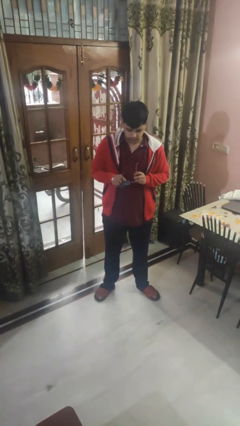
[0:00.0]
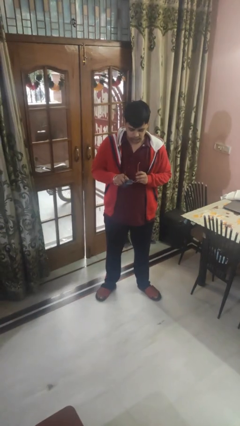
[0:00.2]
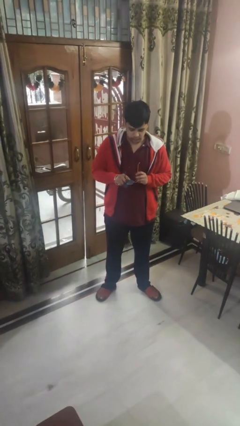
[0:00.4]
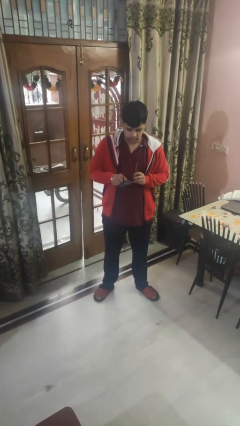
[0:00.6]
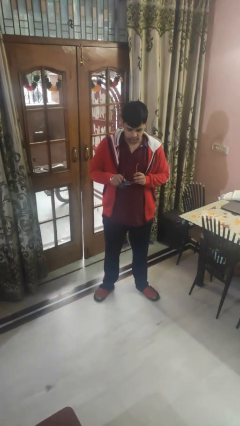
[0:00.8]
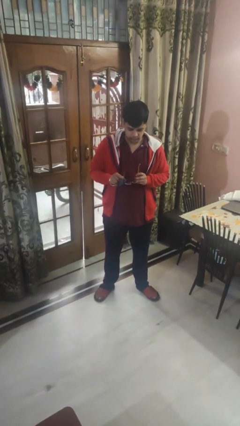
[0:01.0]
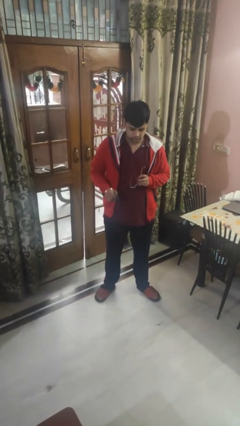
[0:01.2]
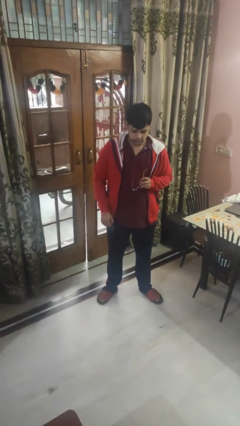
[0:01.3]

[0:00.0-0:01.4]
person cleans eyeglasses

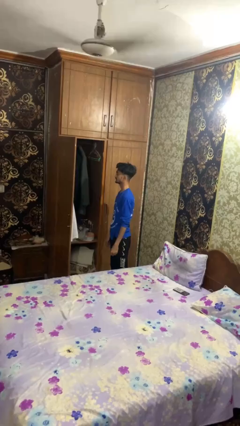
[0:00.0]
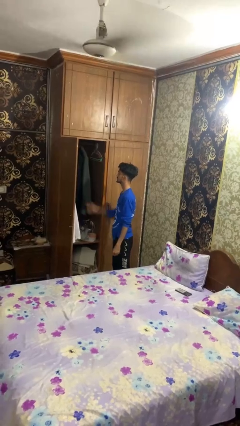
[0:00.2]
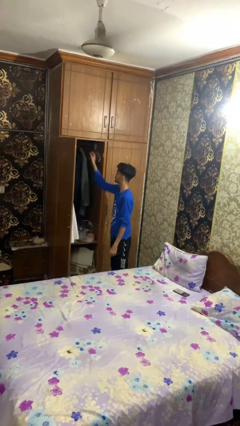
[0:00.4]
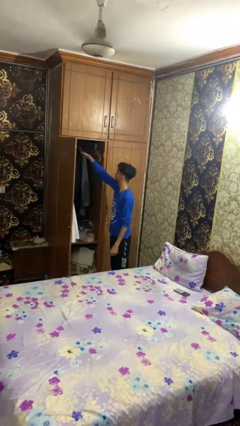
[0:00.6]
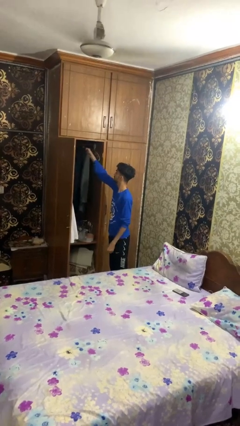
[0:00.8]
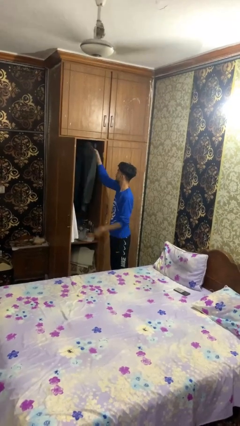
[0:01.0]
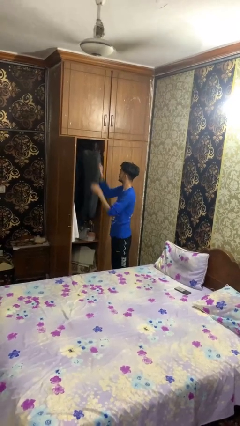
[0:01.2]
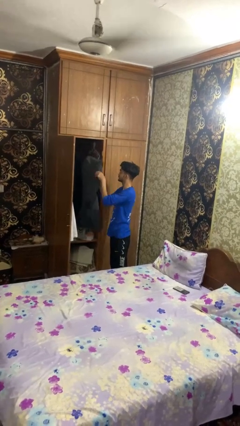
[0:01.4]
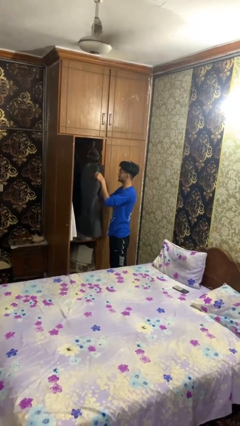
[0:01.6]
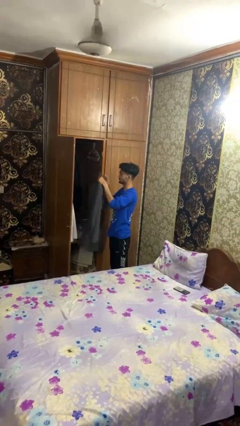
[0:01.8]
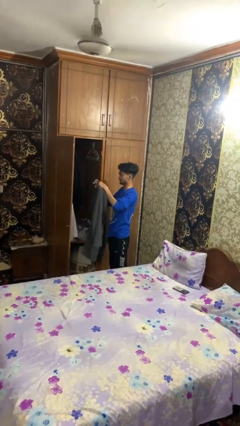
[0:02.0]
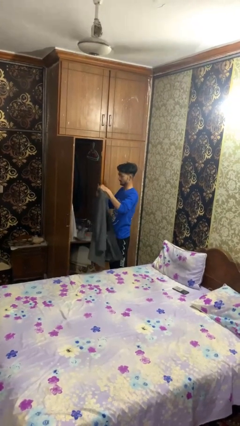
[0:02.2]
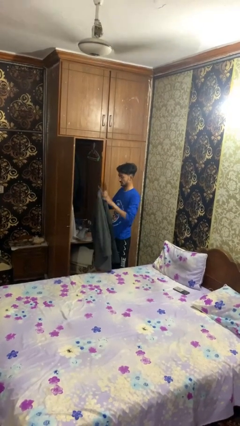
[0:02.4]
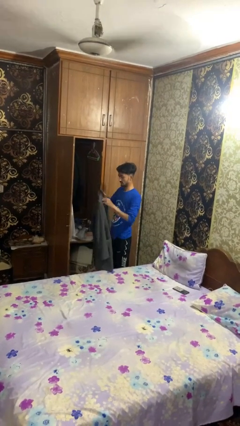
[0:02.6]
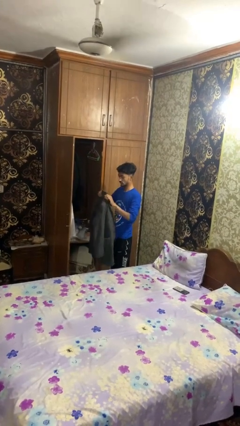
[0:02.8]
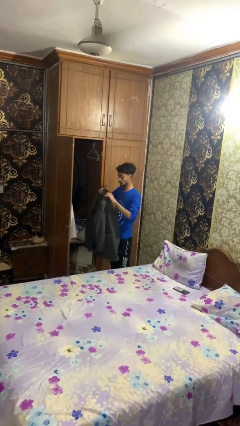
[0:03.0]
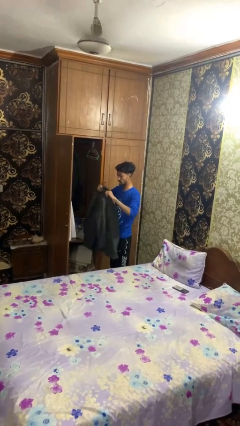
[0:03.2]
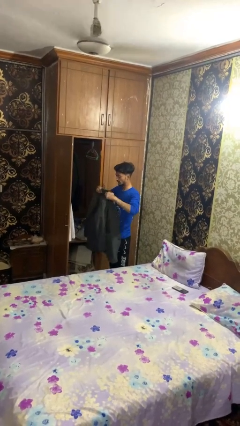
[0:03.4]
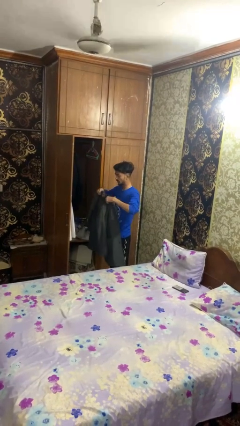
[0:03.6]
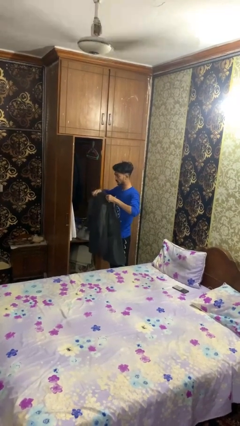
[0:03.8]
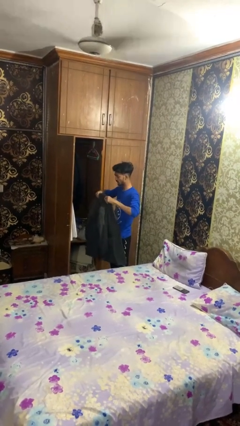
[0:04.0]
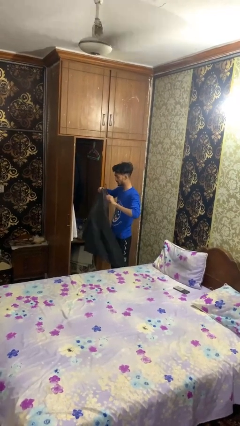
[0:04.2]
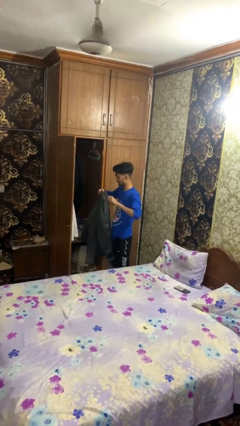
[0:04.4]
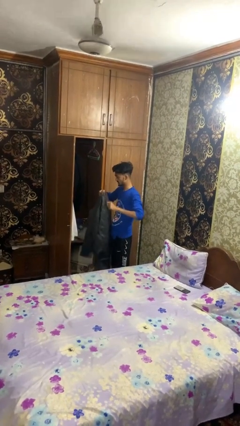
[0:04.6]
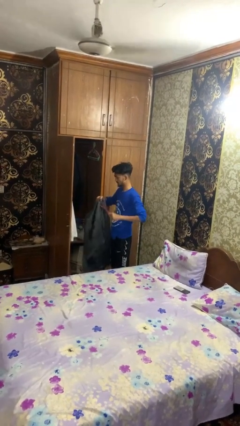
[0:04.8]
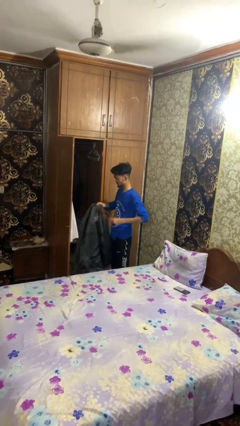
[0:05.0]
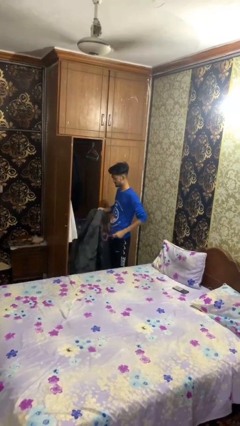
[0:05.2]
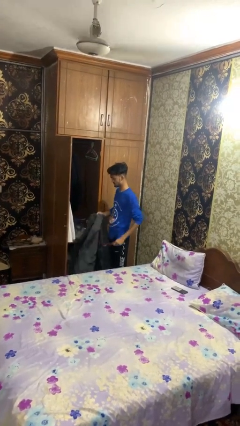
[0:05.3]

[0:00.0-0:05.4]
person takes clothes from closet

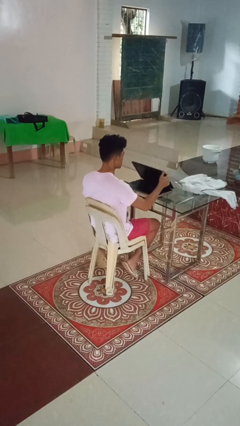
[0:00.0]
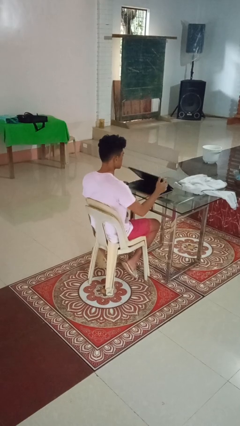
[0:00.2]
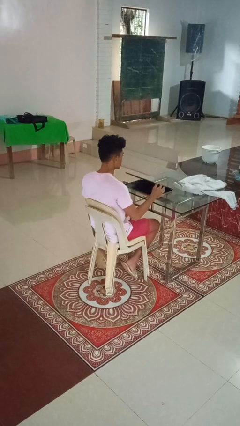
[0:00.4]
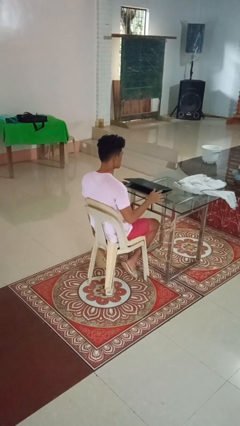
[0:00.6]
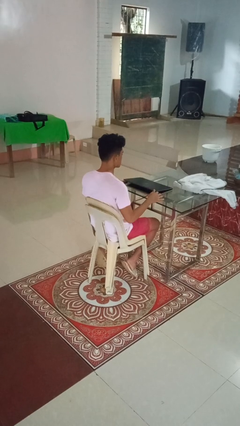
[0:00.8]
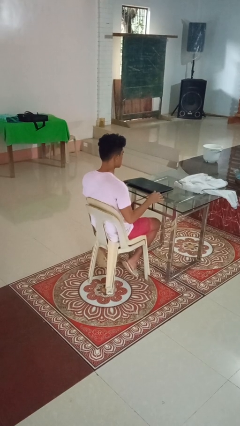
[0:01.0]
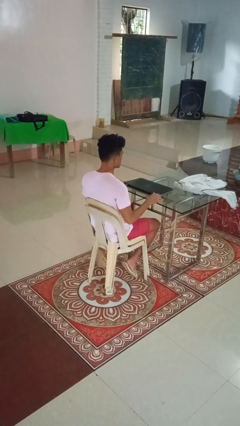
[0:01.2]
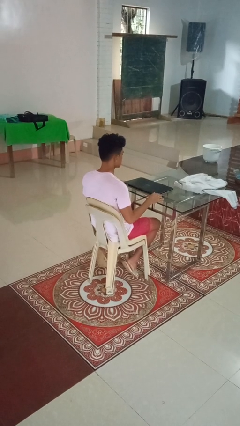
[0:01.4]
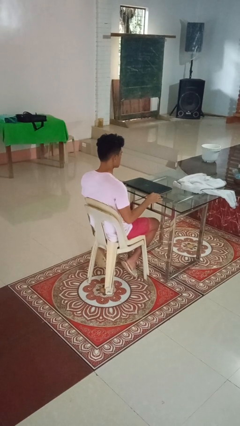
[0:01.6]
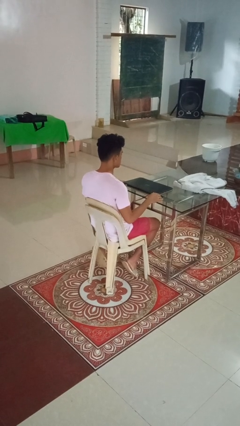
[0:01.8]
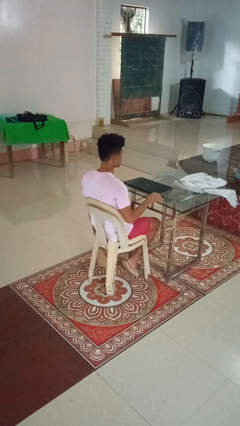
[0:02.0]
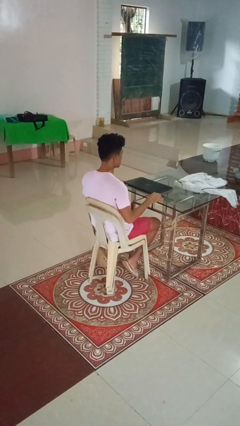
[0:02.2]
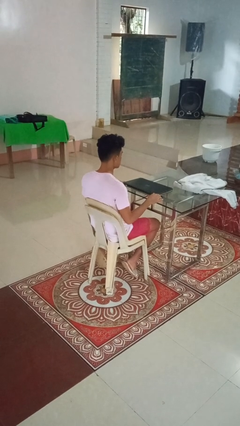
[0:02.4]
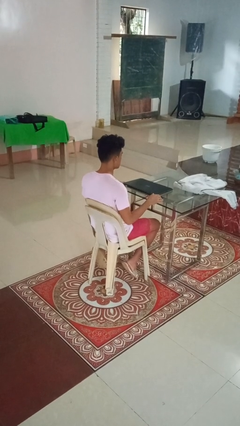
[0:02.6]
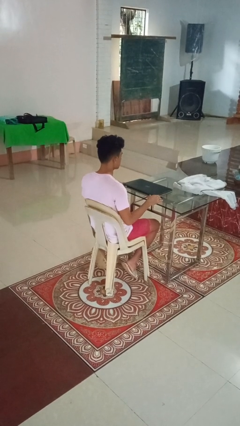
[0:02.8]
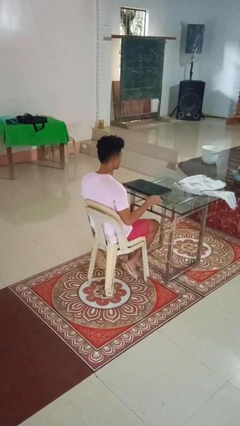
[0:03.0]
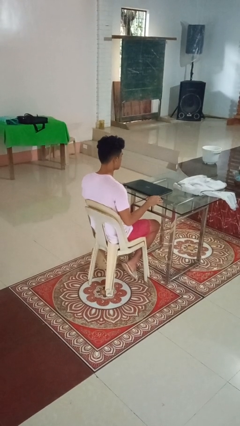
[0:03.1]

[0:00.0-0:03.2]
person closes laptop

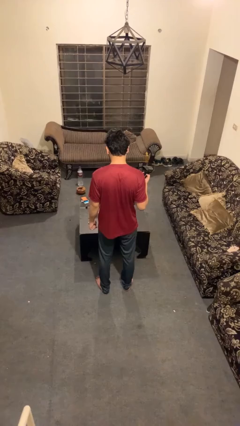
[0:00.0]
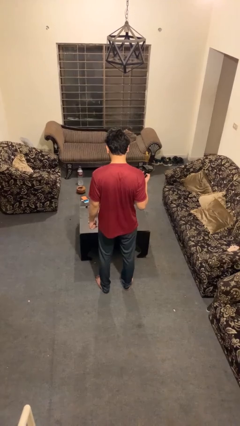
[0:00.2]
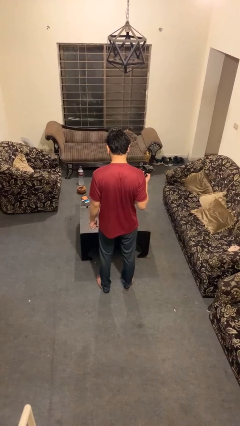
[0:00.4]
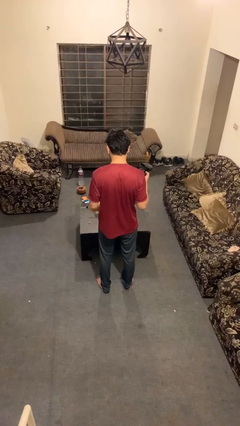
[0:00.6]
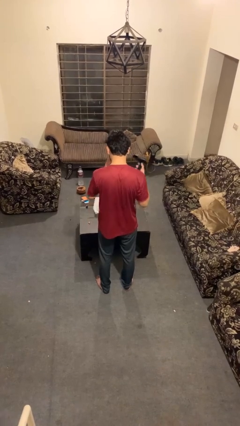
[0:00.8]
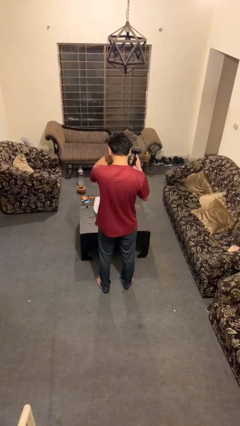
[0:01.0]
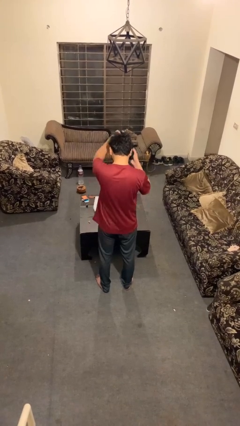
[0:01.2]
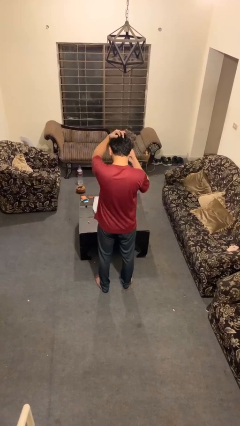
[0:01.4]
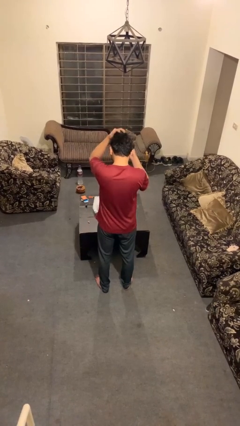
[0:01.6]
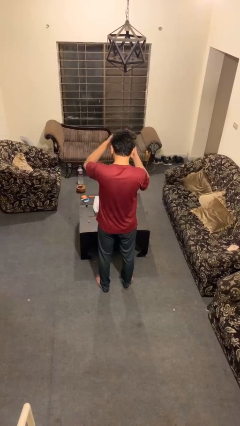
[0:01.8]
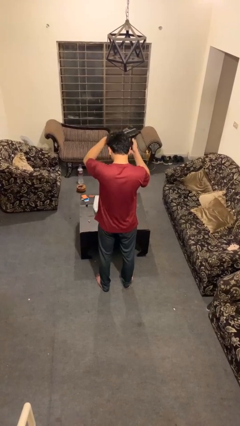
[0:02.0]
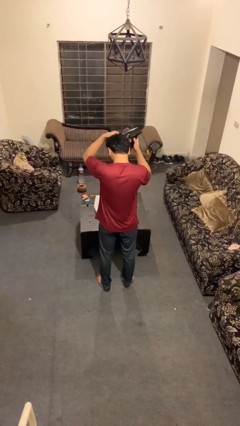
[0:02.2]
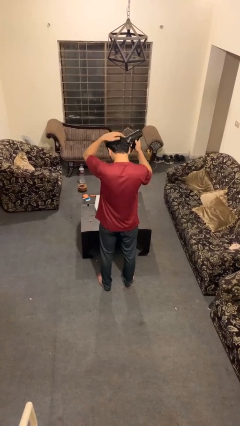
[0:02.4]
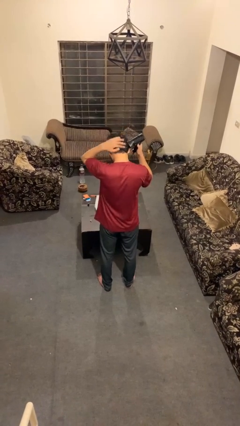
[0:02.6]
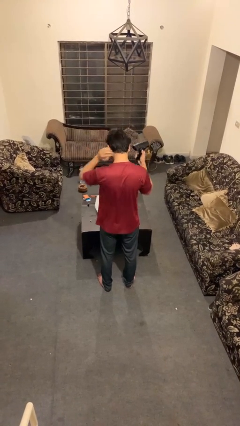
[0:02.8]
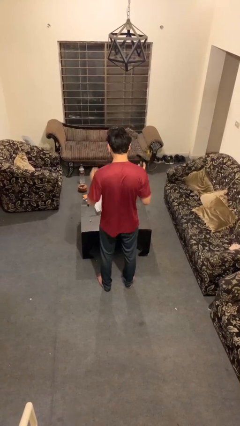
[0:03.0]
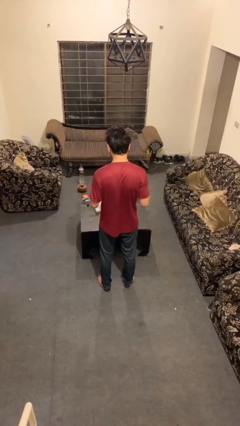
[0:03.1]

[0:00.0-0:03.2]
person dries hair with hairdryer

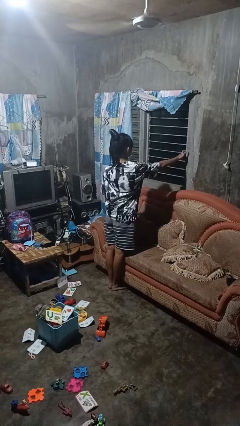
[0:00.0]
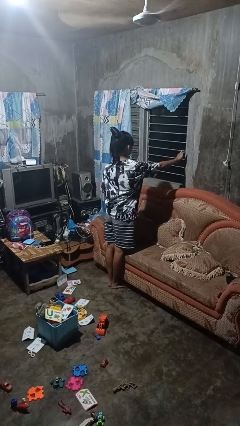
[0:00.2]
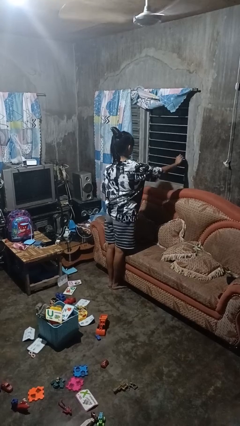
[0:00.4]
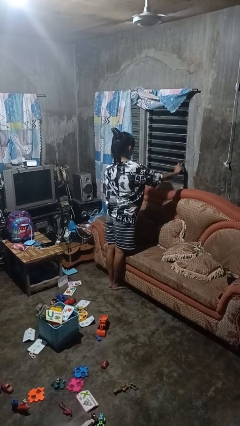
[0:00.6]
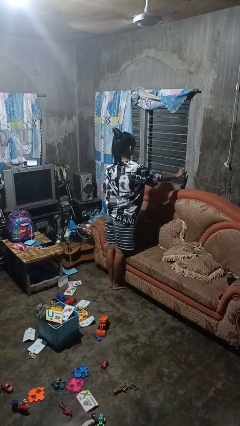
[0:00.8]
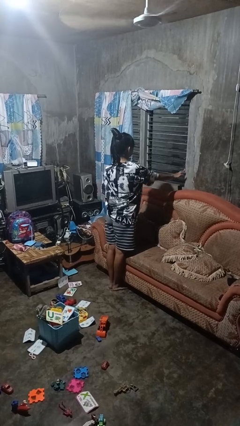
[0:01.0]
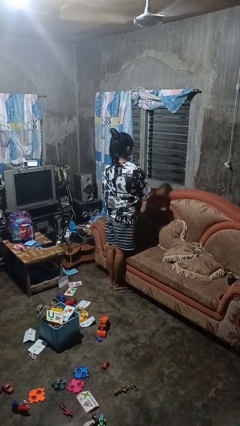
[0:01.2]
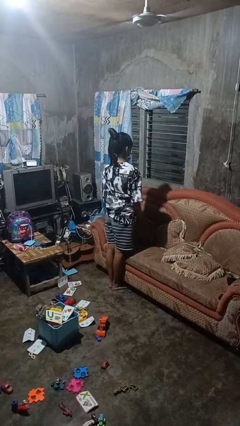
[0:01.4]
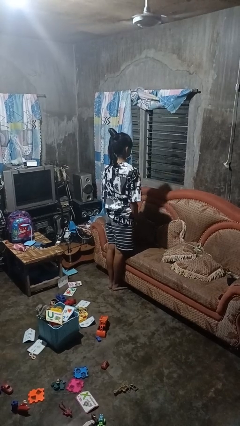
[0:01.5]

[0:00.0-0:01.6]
person opens home window

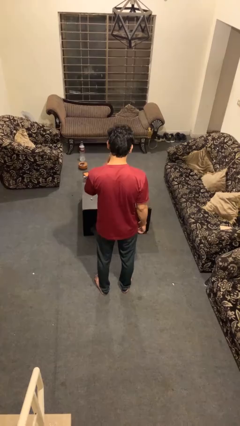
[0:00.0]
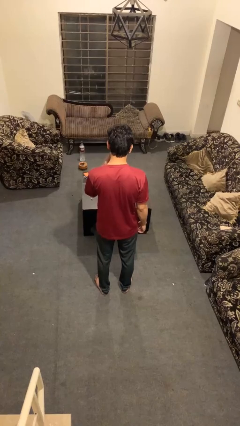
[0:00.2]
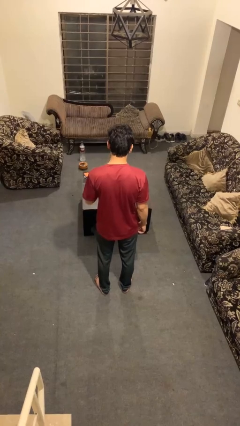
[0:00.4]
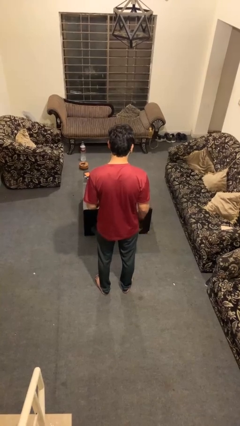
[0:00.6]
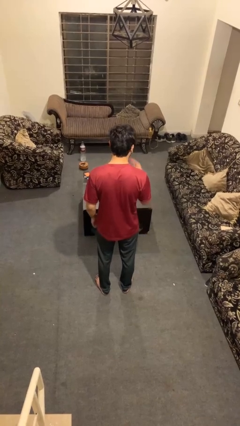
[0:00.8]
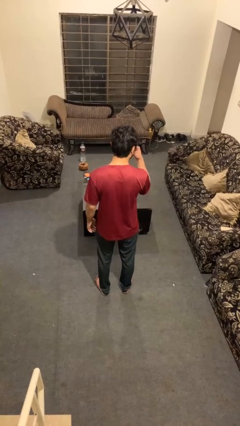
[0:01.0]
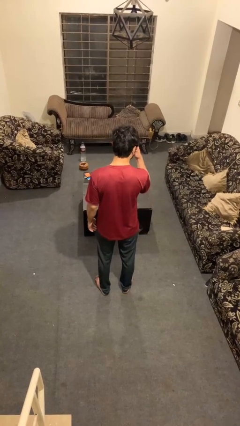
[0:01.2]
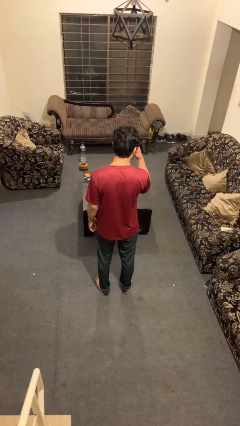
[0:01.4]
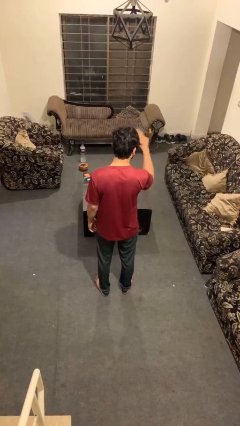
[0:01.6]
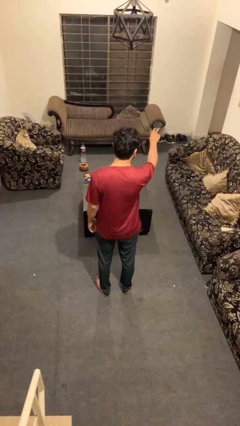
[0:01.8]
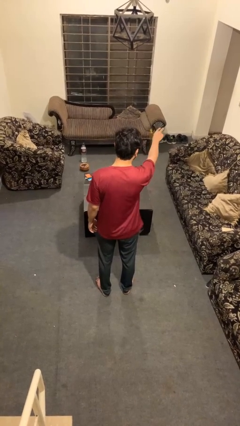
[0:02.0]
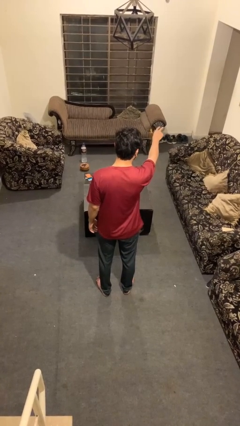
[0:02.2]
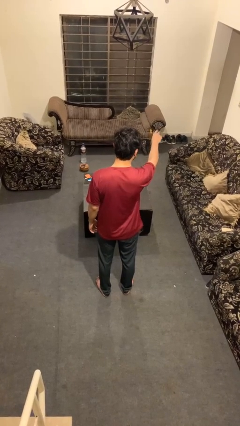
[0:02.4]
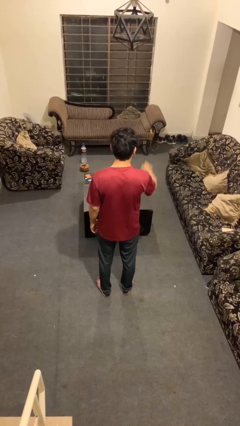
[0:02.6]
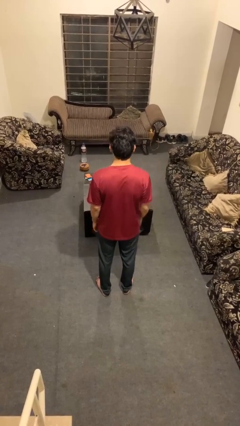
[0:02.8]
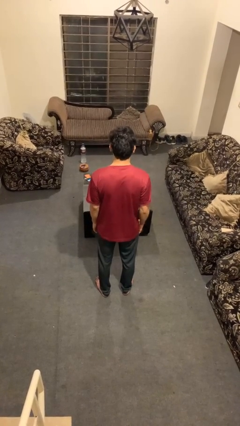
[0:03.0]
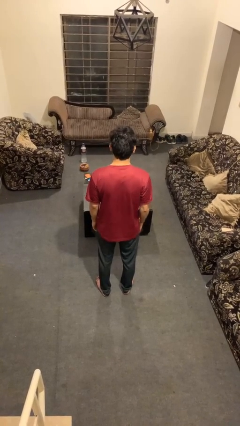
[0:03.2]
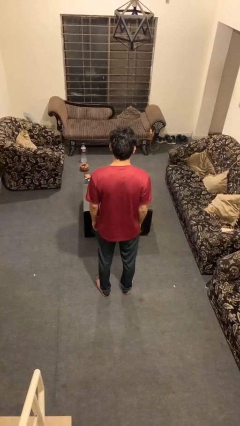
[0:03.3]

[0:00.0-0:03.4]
person gestures watch closely
